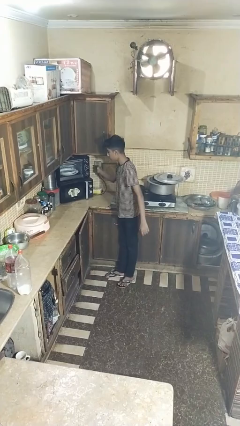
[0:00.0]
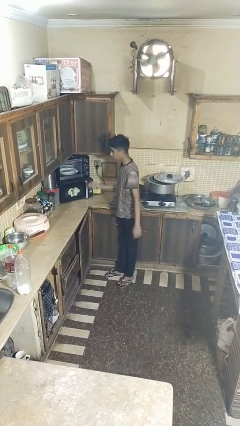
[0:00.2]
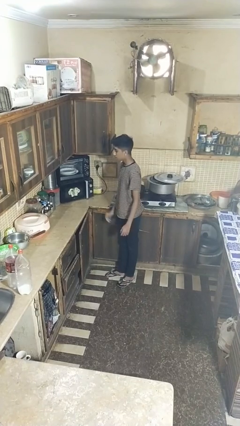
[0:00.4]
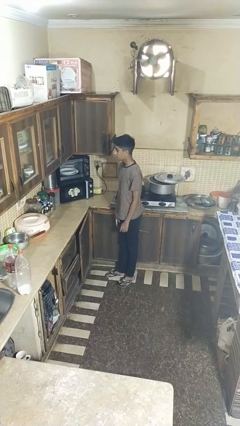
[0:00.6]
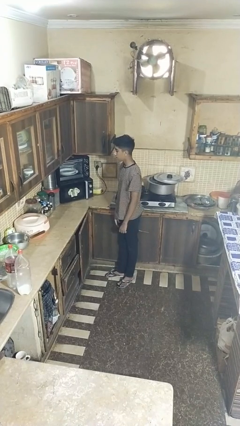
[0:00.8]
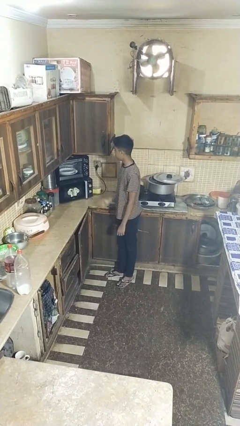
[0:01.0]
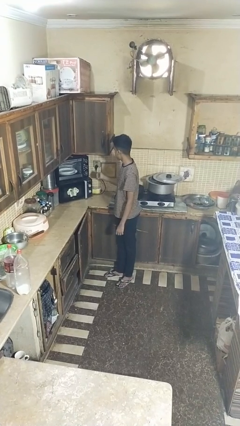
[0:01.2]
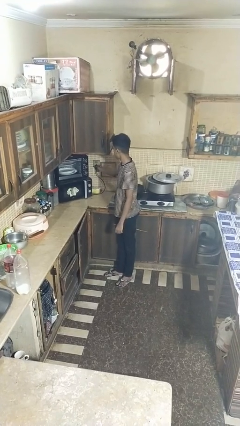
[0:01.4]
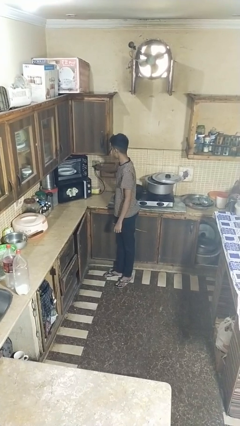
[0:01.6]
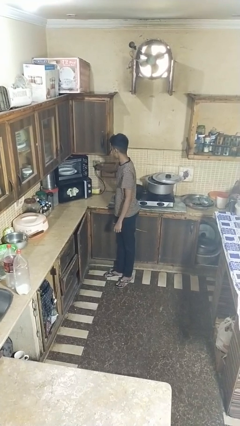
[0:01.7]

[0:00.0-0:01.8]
person unplugs from electrical socket

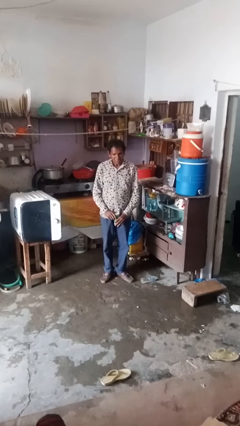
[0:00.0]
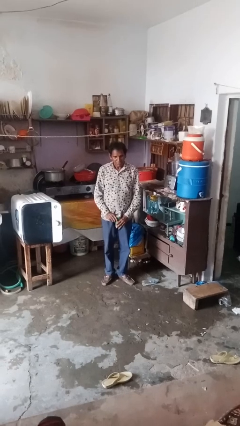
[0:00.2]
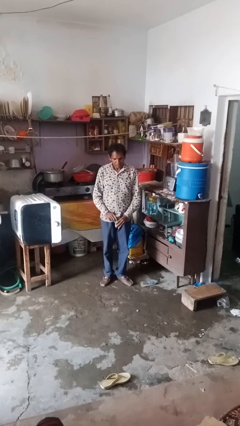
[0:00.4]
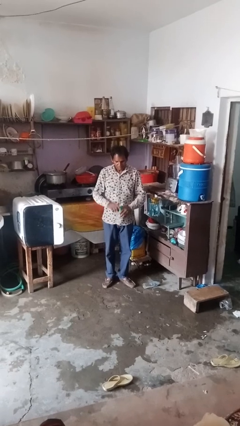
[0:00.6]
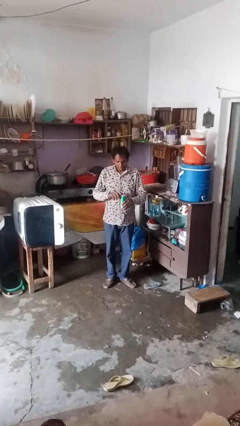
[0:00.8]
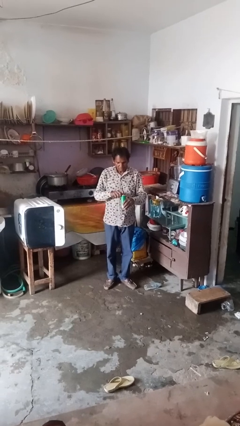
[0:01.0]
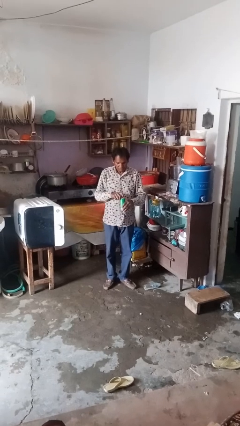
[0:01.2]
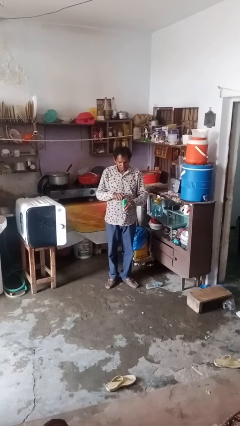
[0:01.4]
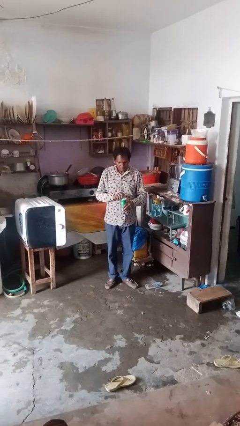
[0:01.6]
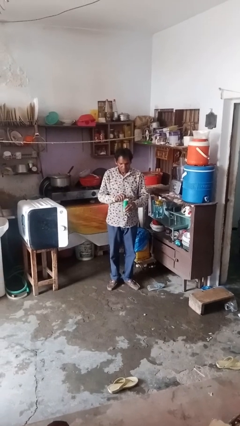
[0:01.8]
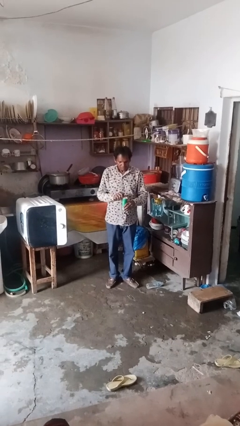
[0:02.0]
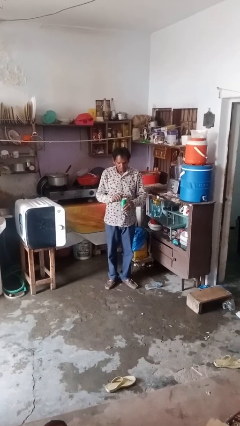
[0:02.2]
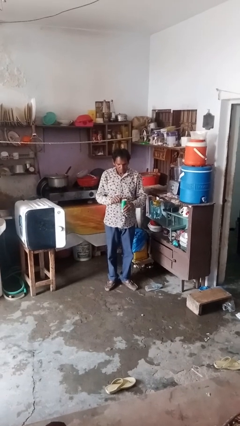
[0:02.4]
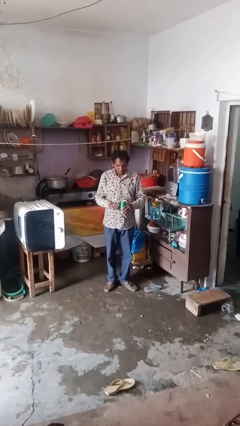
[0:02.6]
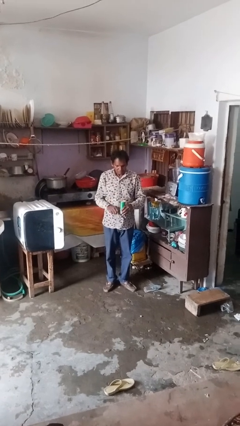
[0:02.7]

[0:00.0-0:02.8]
person opens beverage can

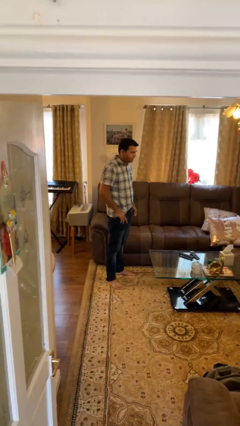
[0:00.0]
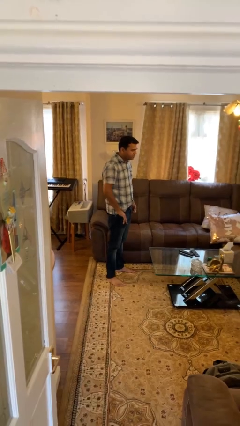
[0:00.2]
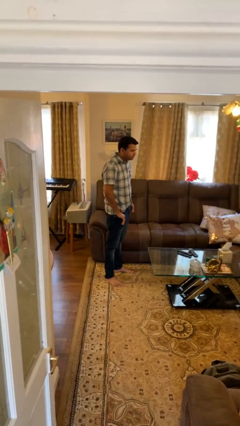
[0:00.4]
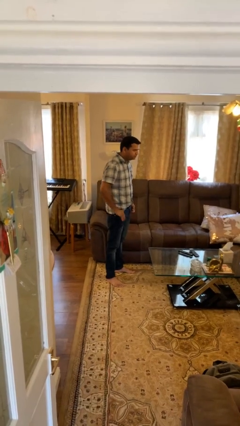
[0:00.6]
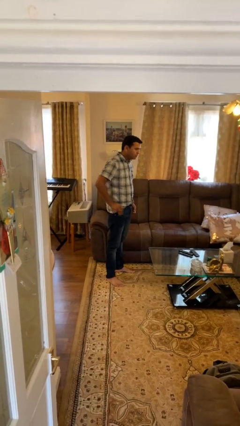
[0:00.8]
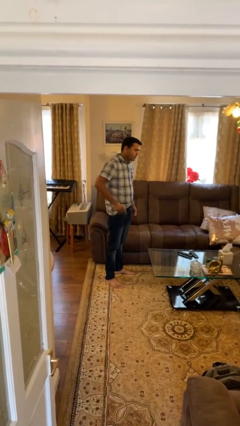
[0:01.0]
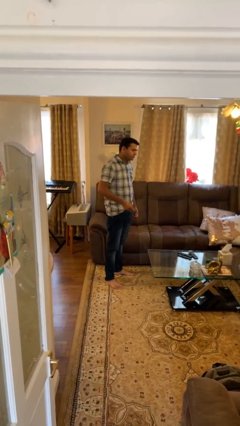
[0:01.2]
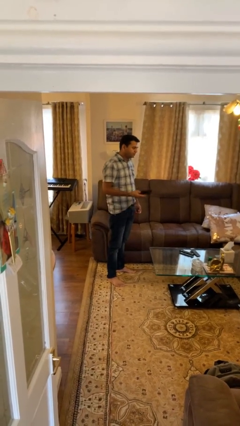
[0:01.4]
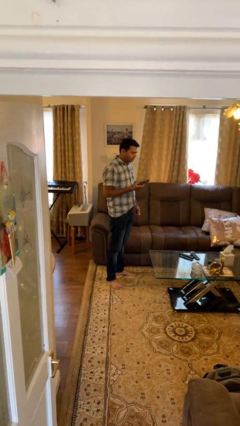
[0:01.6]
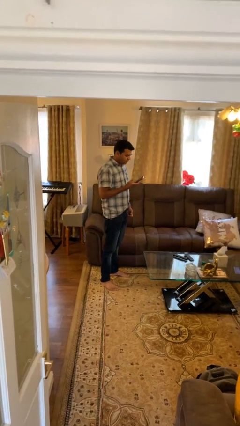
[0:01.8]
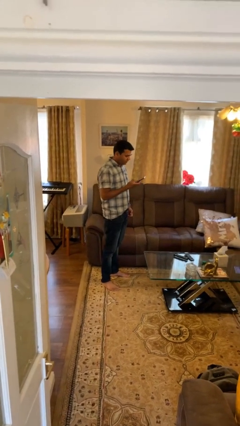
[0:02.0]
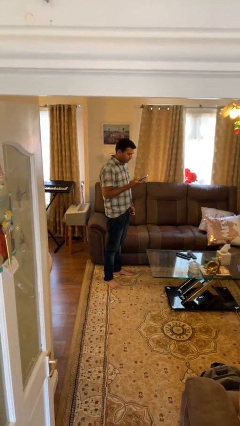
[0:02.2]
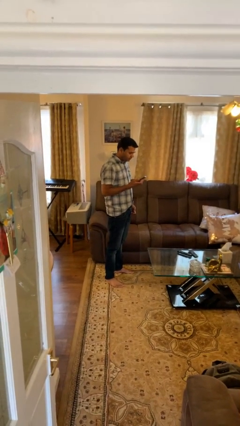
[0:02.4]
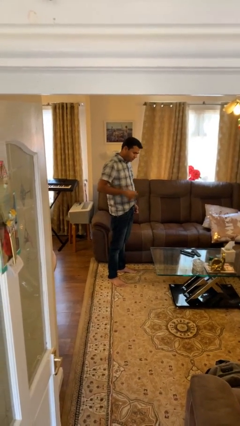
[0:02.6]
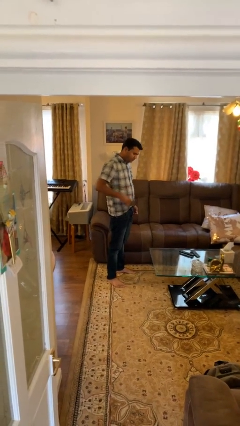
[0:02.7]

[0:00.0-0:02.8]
person takes phone from pocket

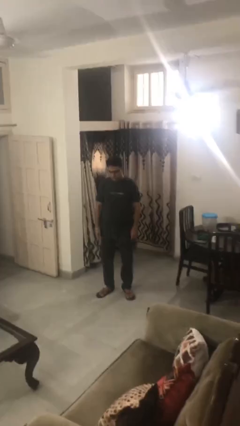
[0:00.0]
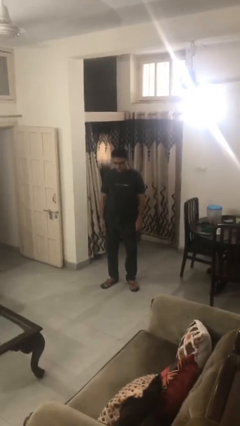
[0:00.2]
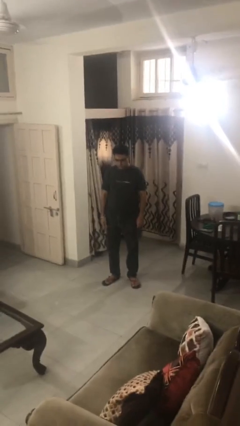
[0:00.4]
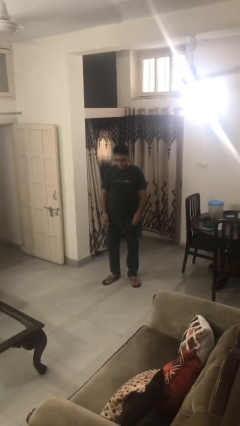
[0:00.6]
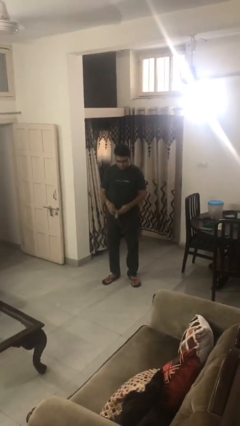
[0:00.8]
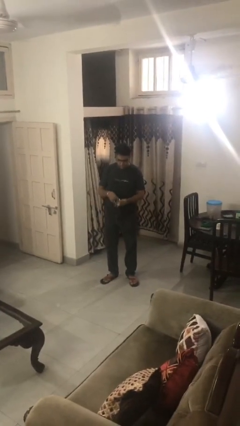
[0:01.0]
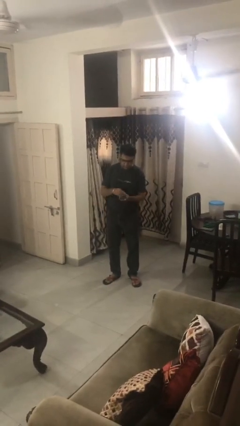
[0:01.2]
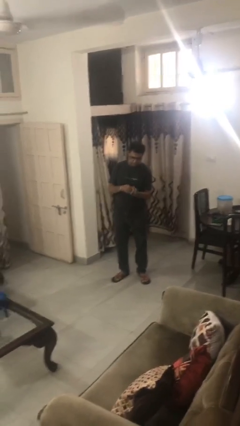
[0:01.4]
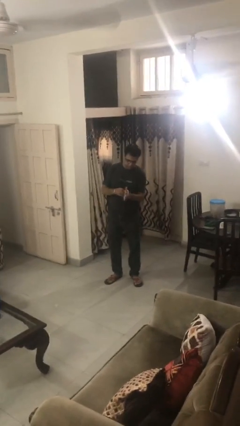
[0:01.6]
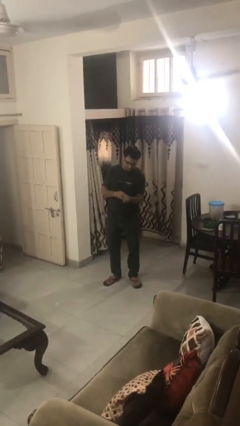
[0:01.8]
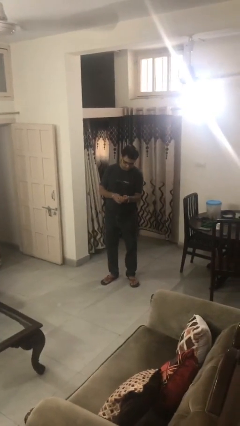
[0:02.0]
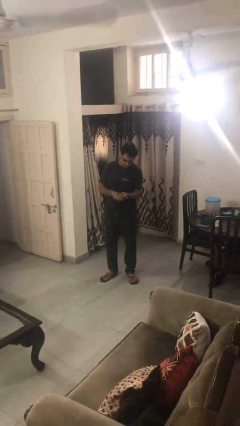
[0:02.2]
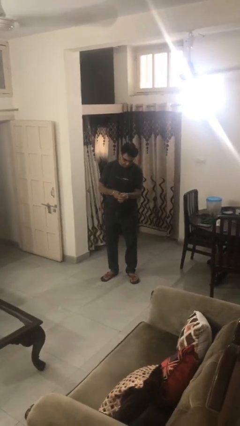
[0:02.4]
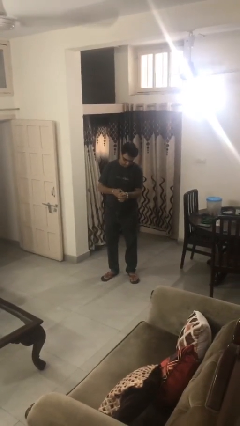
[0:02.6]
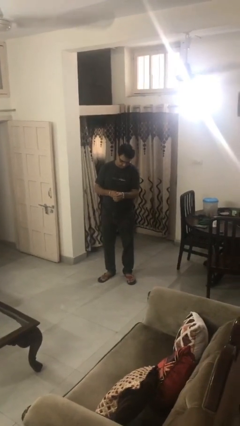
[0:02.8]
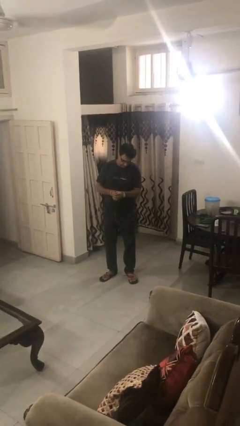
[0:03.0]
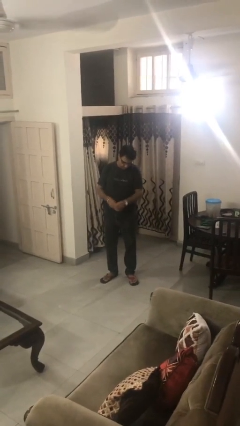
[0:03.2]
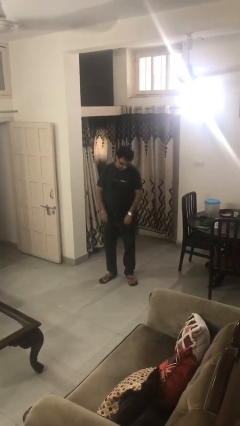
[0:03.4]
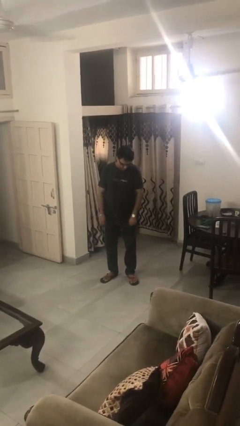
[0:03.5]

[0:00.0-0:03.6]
person puts on wristwatch

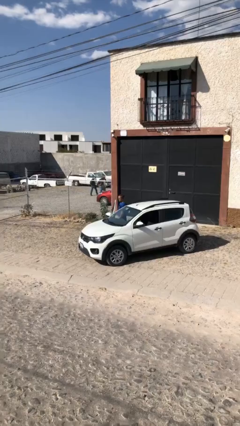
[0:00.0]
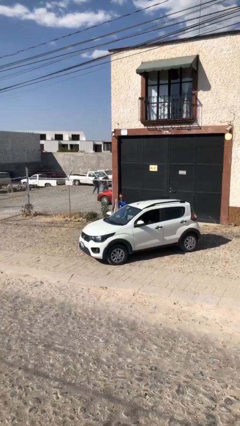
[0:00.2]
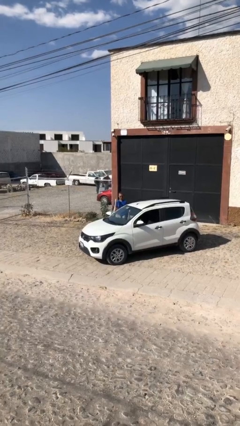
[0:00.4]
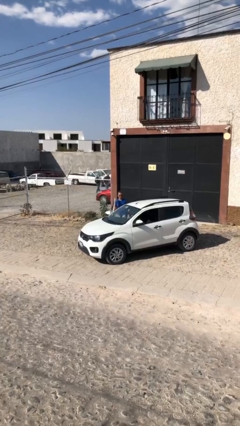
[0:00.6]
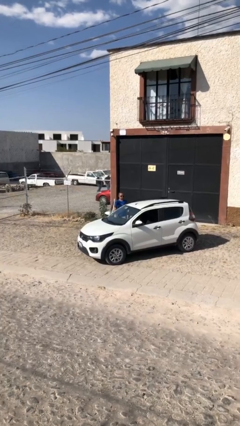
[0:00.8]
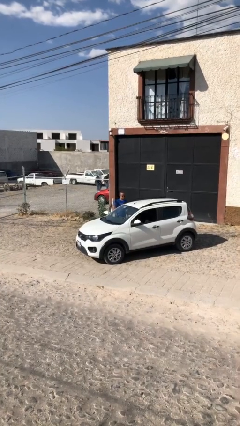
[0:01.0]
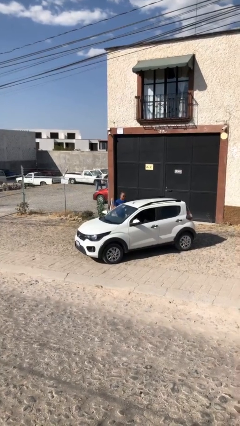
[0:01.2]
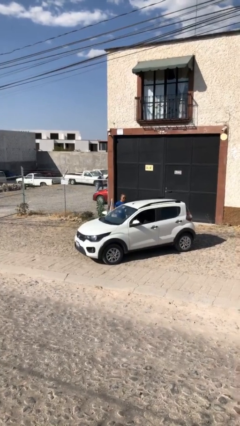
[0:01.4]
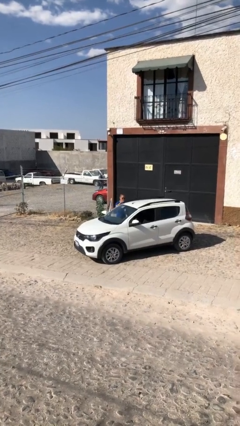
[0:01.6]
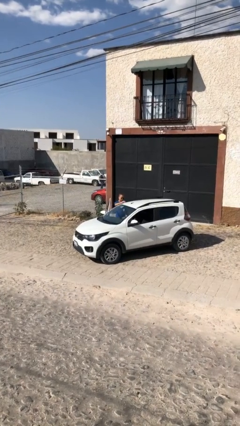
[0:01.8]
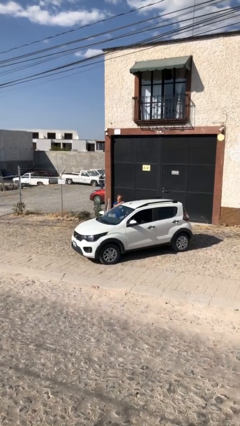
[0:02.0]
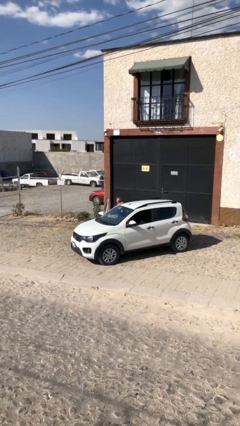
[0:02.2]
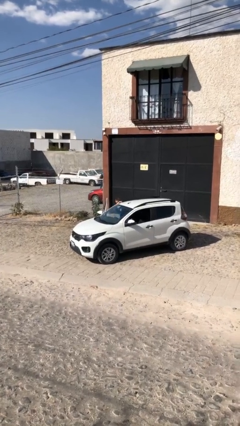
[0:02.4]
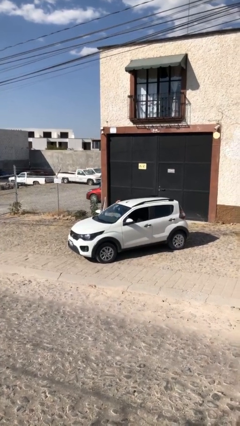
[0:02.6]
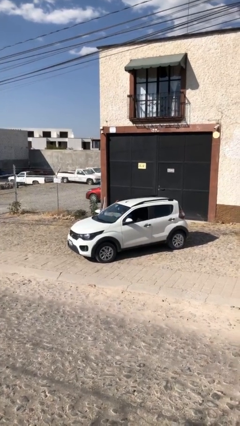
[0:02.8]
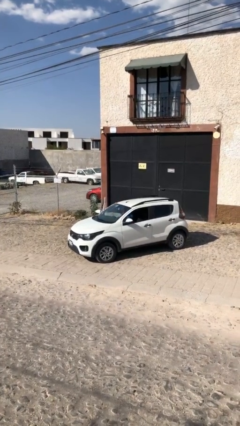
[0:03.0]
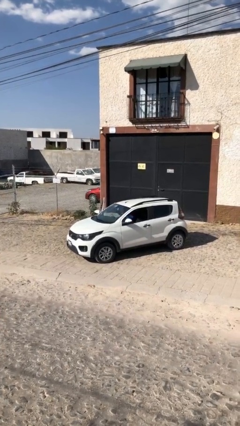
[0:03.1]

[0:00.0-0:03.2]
person enters car

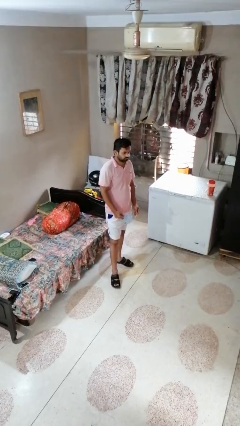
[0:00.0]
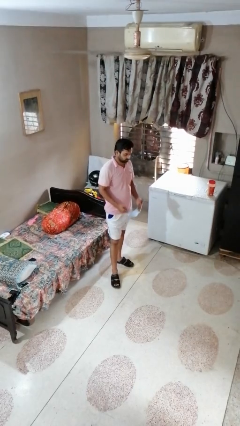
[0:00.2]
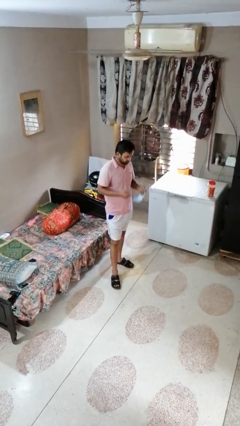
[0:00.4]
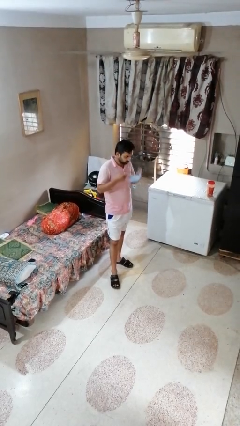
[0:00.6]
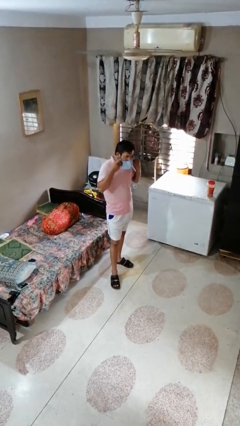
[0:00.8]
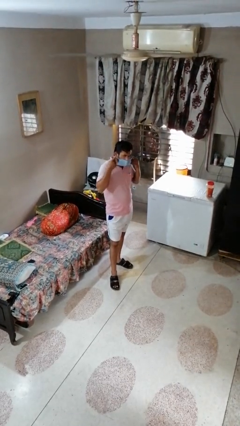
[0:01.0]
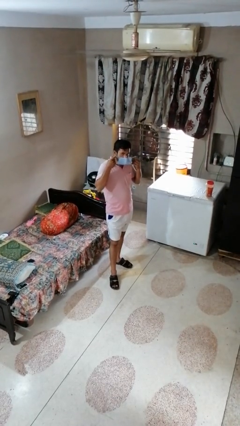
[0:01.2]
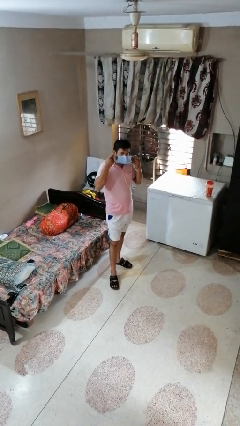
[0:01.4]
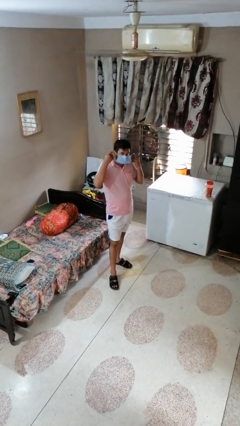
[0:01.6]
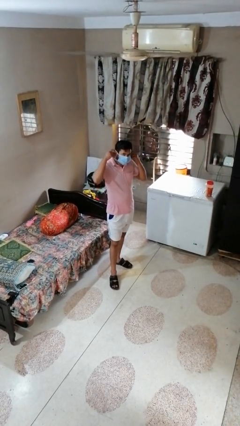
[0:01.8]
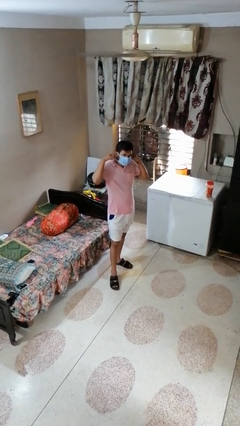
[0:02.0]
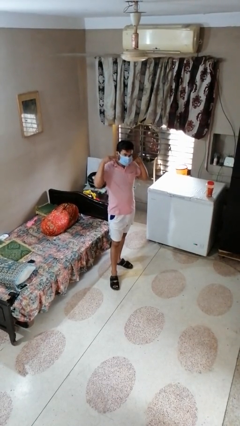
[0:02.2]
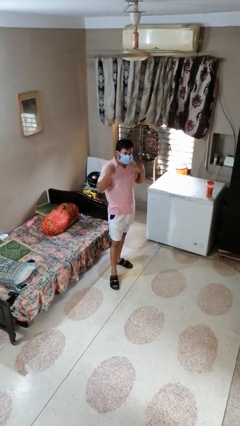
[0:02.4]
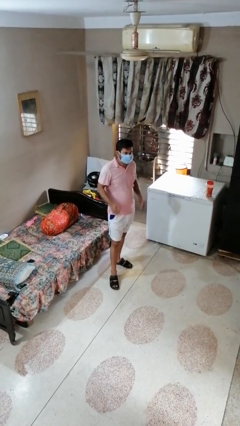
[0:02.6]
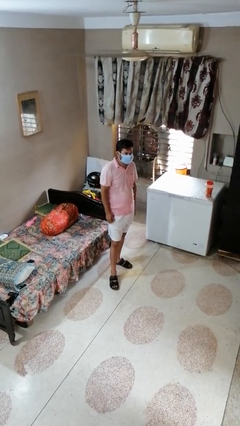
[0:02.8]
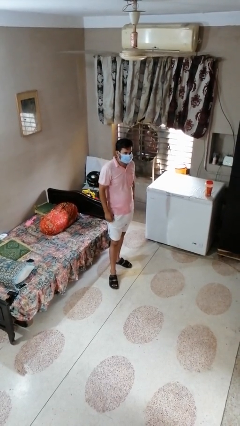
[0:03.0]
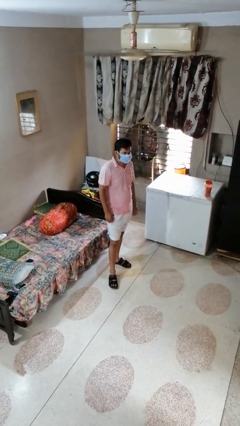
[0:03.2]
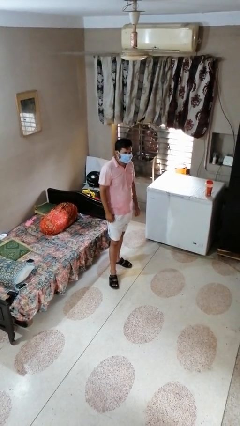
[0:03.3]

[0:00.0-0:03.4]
person puts on facemask
